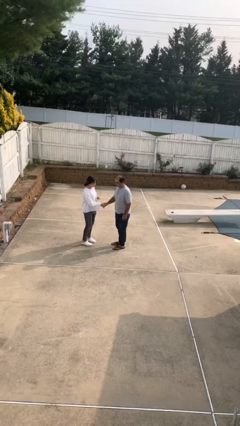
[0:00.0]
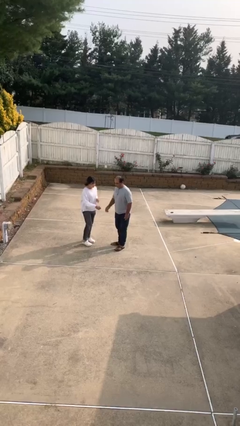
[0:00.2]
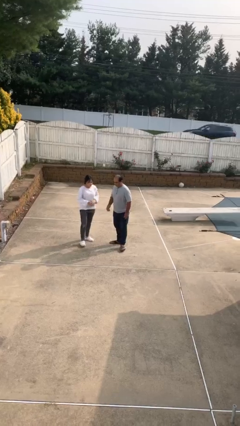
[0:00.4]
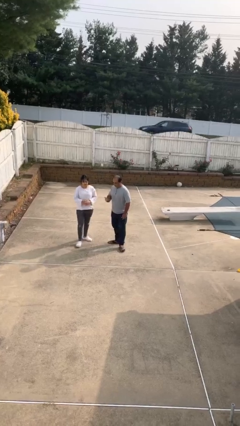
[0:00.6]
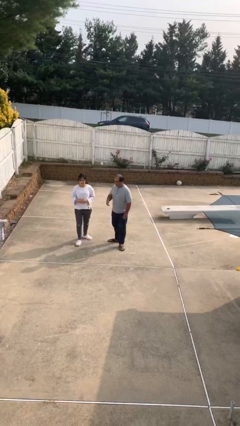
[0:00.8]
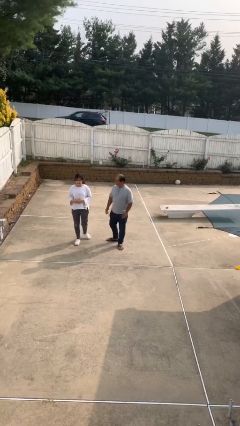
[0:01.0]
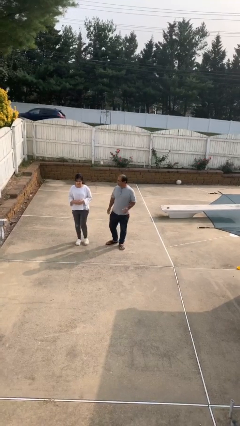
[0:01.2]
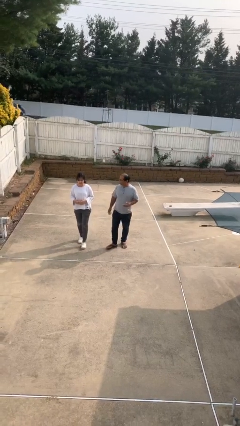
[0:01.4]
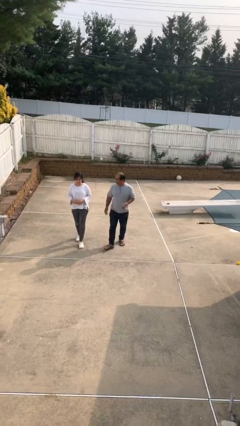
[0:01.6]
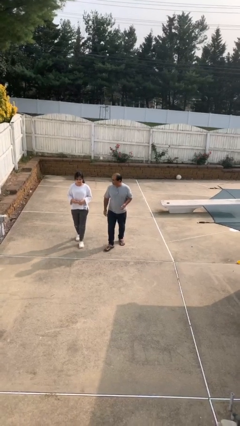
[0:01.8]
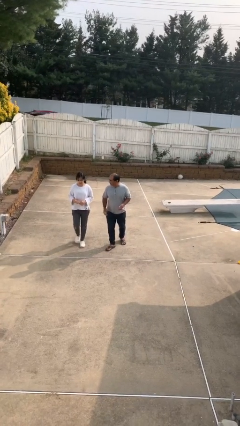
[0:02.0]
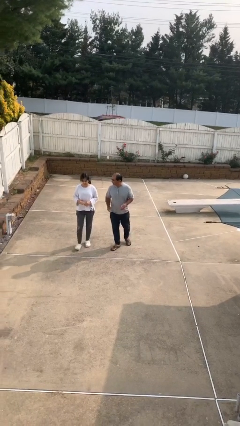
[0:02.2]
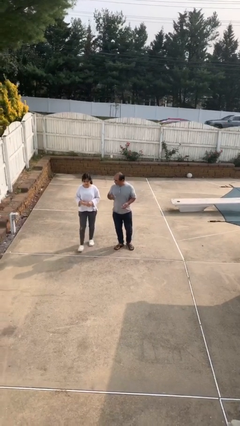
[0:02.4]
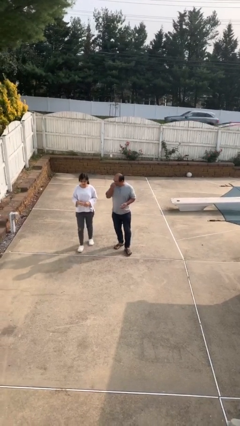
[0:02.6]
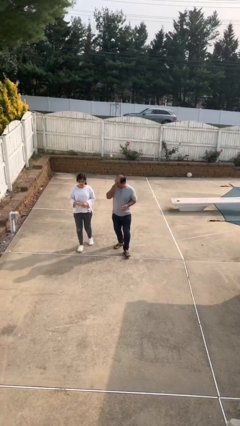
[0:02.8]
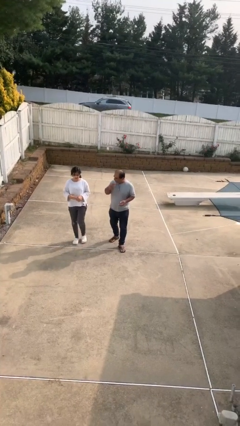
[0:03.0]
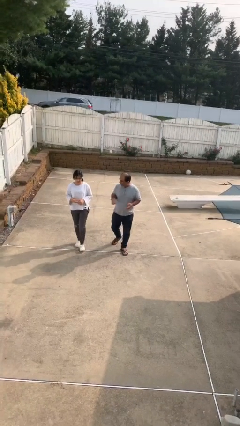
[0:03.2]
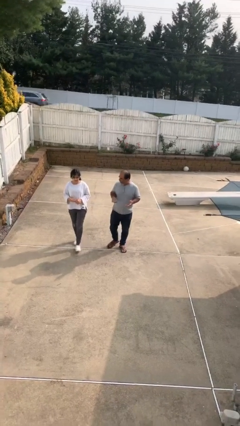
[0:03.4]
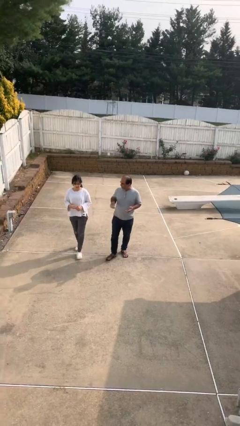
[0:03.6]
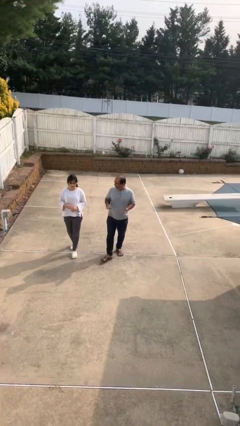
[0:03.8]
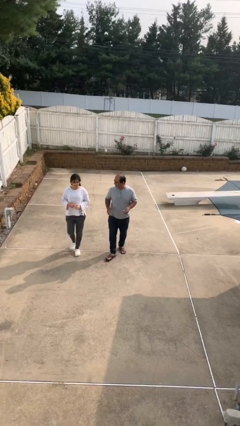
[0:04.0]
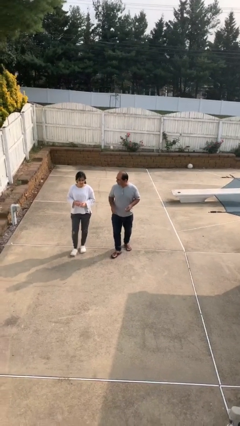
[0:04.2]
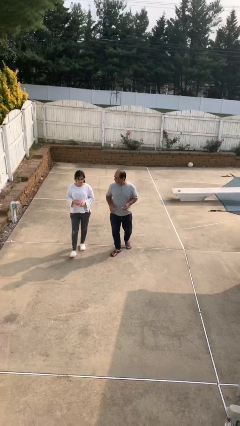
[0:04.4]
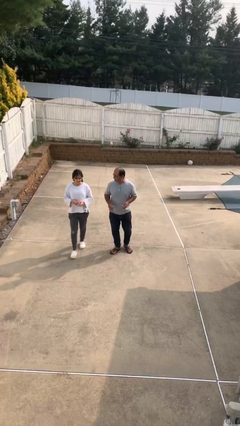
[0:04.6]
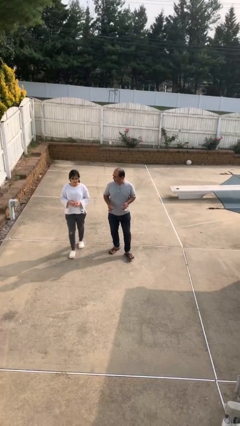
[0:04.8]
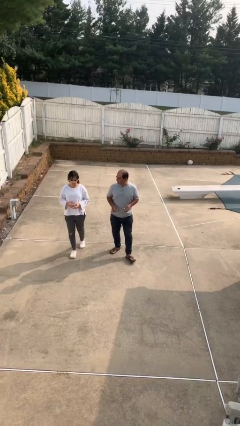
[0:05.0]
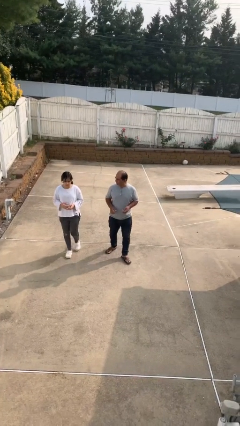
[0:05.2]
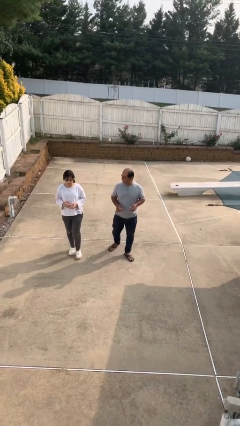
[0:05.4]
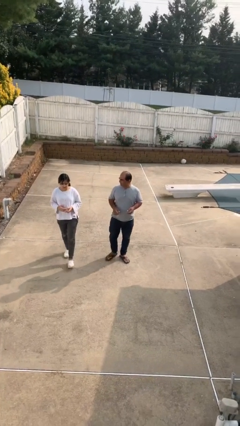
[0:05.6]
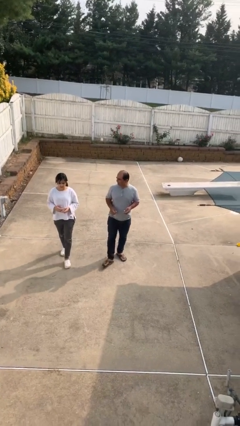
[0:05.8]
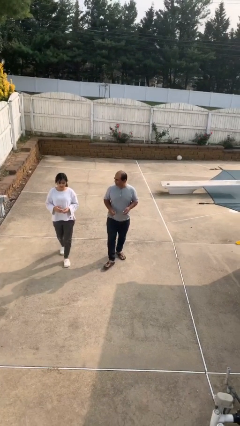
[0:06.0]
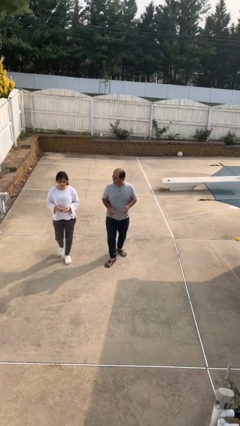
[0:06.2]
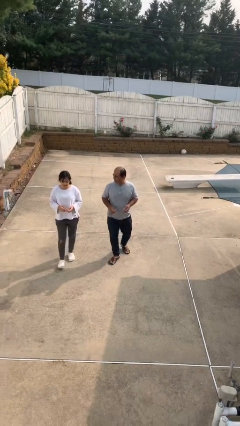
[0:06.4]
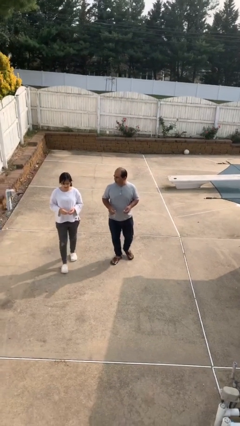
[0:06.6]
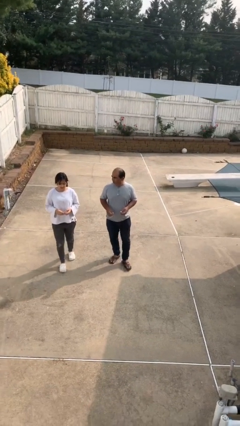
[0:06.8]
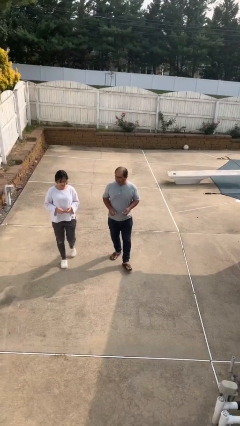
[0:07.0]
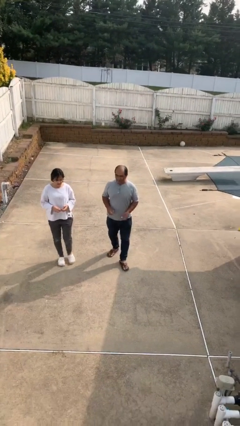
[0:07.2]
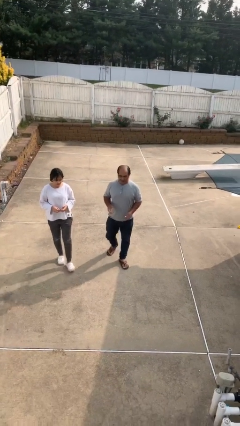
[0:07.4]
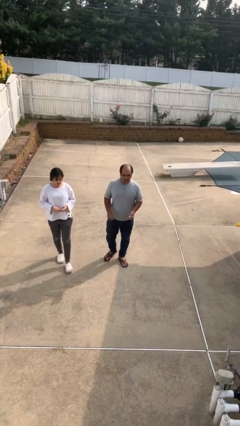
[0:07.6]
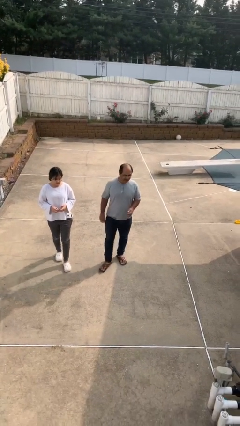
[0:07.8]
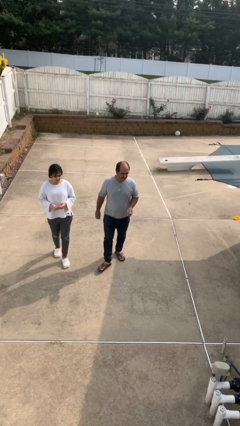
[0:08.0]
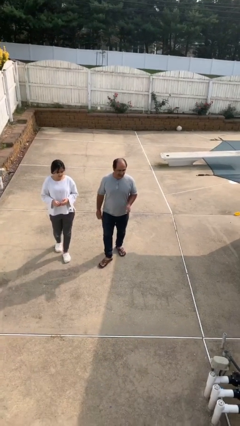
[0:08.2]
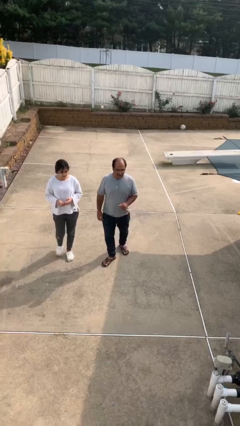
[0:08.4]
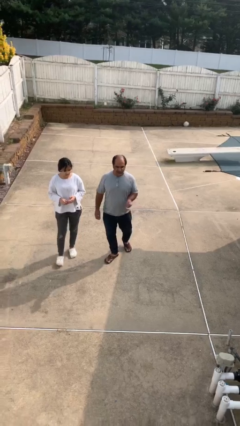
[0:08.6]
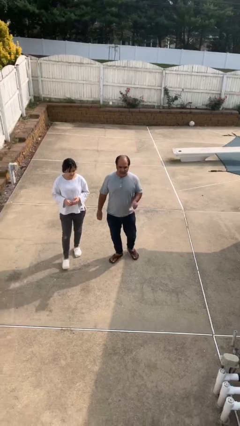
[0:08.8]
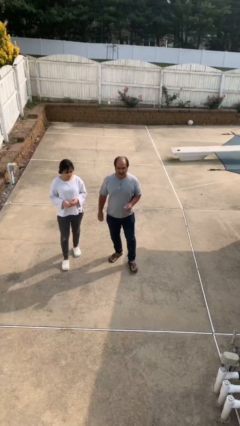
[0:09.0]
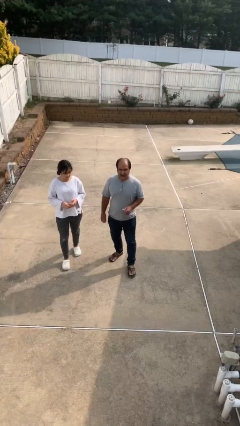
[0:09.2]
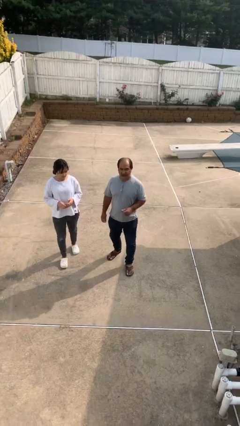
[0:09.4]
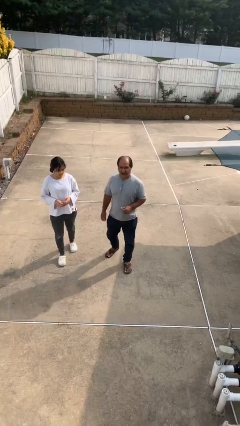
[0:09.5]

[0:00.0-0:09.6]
person talks to person

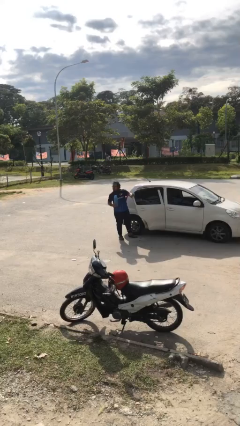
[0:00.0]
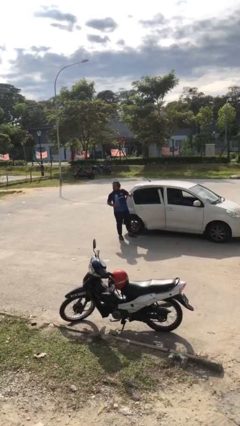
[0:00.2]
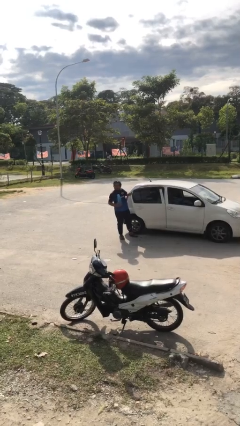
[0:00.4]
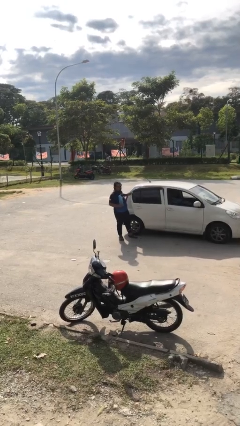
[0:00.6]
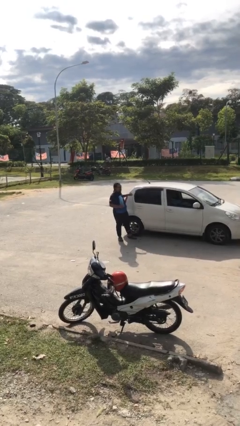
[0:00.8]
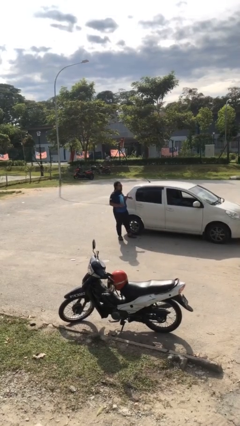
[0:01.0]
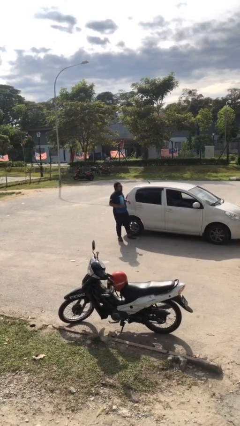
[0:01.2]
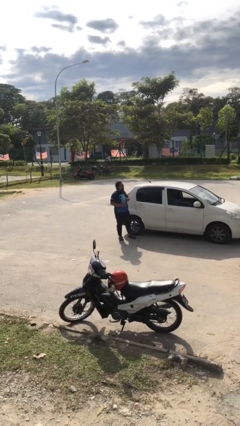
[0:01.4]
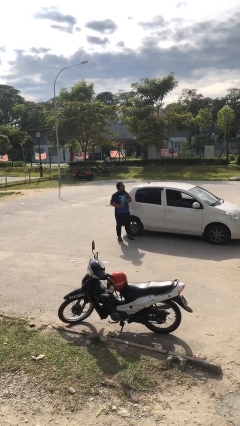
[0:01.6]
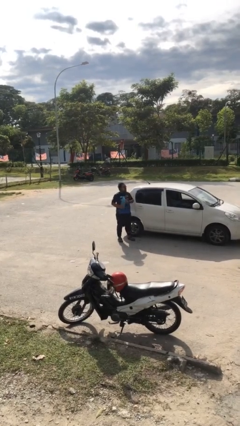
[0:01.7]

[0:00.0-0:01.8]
person closes car door

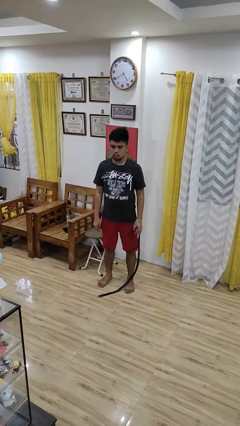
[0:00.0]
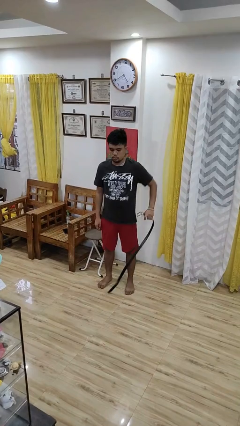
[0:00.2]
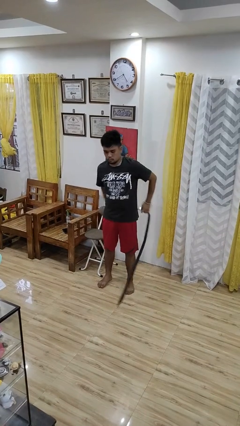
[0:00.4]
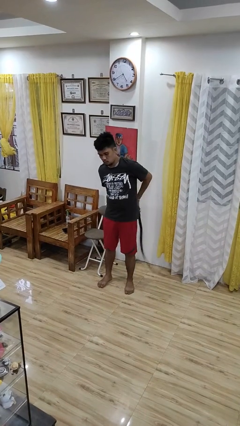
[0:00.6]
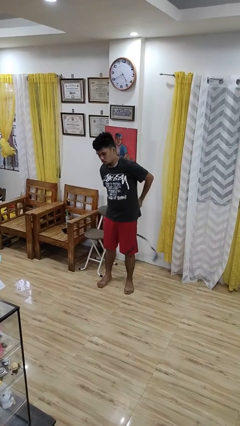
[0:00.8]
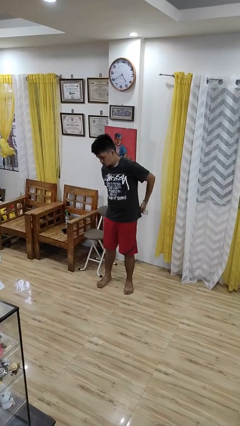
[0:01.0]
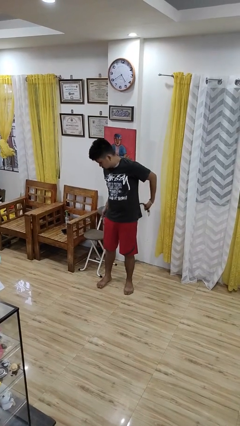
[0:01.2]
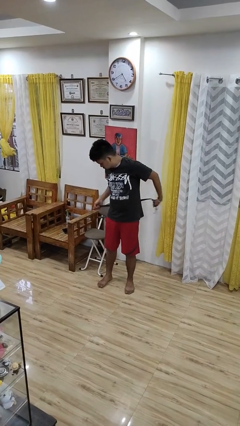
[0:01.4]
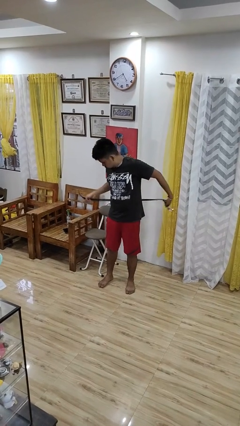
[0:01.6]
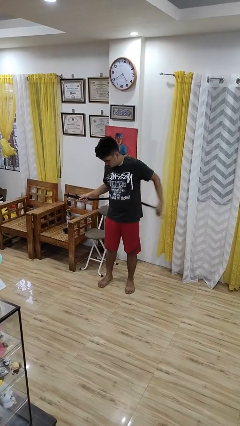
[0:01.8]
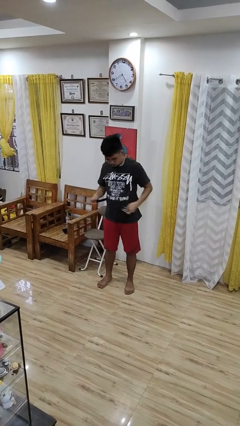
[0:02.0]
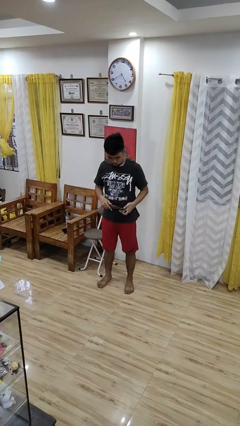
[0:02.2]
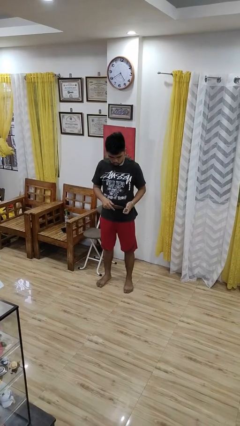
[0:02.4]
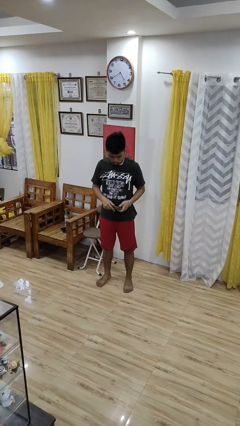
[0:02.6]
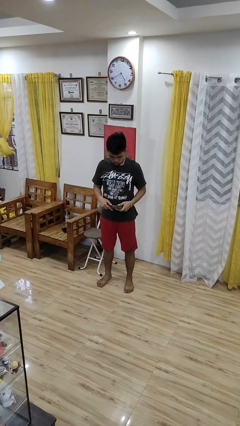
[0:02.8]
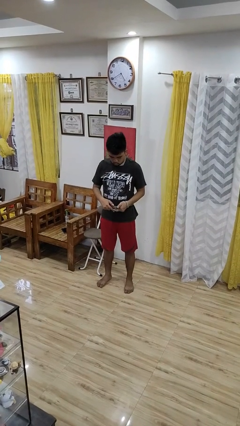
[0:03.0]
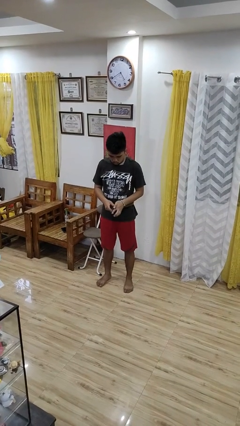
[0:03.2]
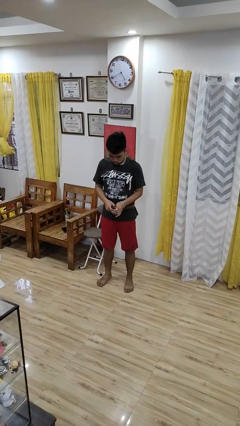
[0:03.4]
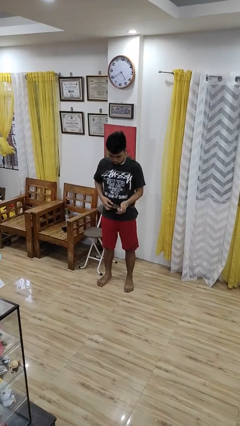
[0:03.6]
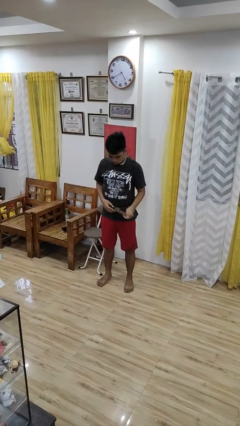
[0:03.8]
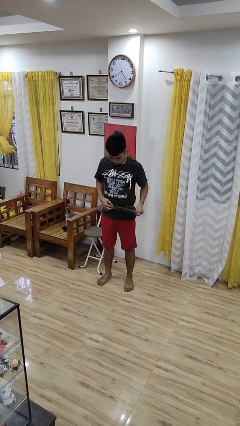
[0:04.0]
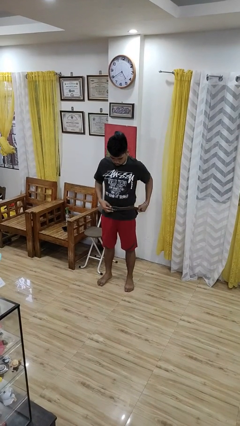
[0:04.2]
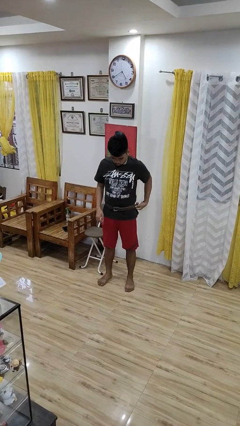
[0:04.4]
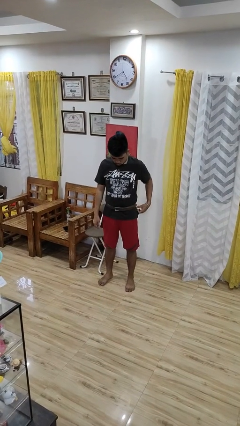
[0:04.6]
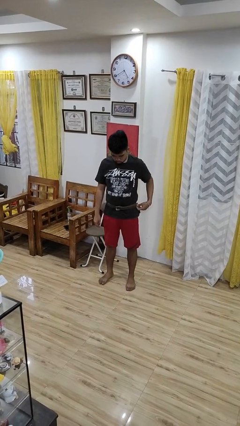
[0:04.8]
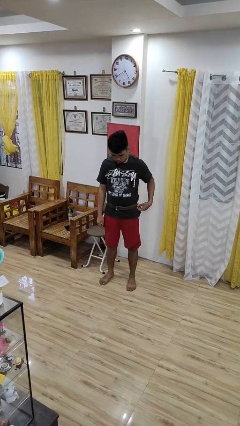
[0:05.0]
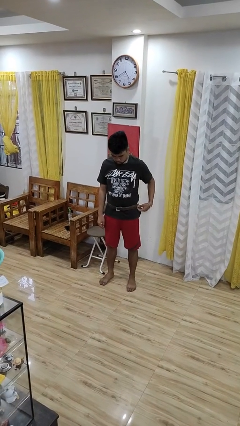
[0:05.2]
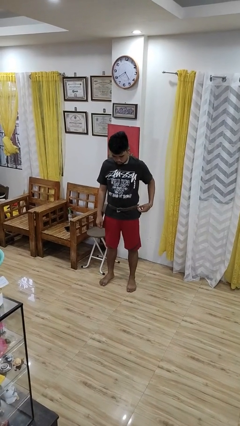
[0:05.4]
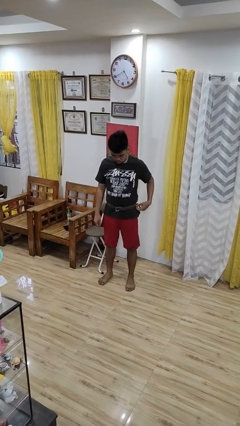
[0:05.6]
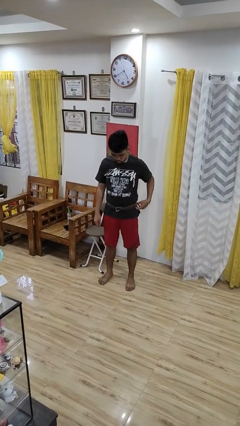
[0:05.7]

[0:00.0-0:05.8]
person puts on belt

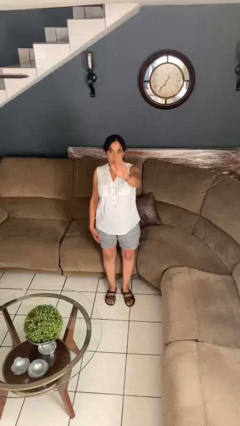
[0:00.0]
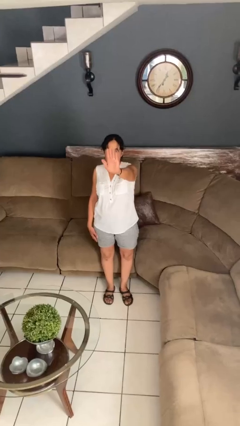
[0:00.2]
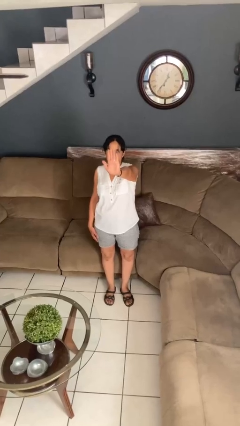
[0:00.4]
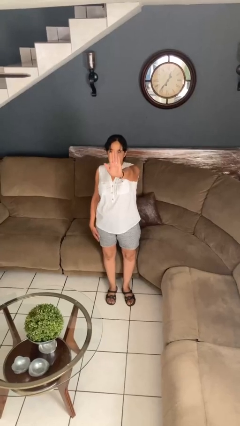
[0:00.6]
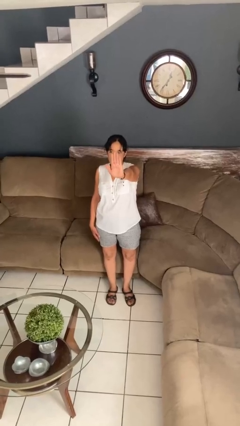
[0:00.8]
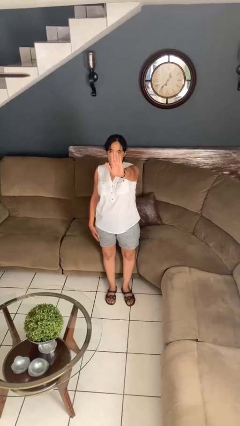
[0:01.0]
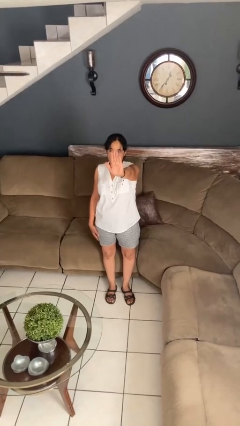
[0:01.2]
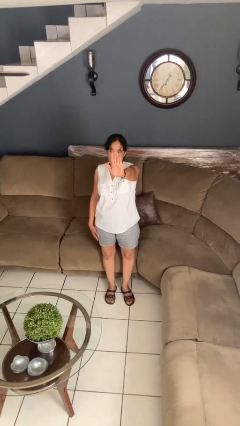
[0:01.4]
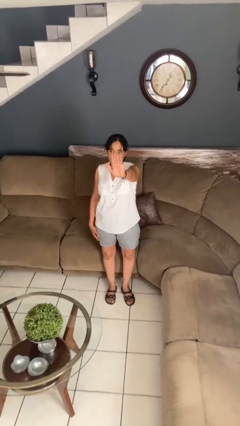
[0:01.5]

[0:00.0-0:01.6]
person gestures stop
